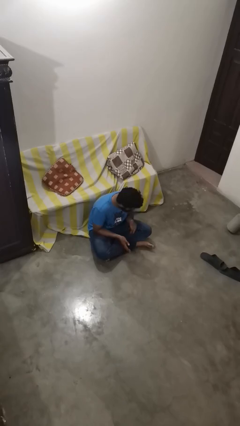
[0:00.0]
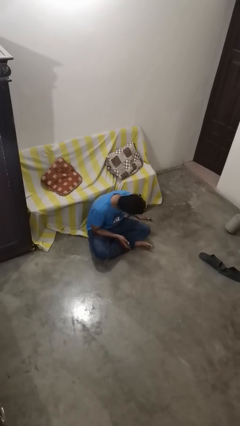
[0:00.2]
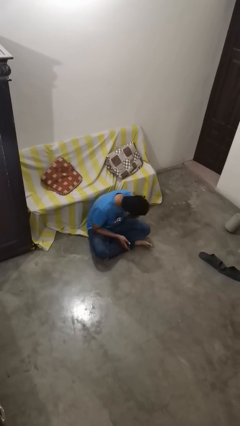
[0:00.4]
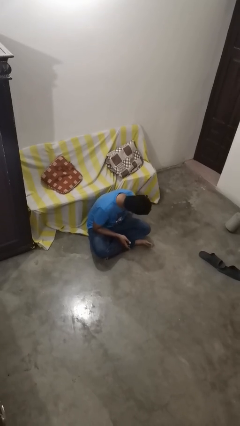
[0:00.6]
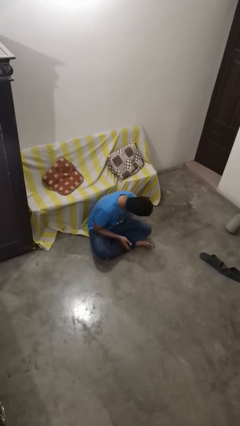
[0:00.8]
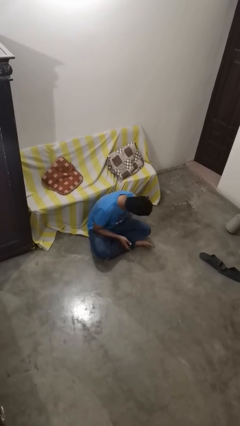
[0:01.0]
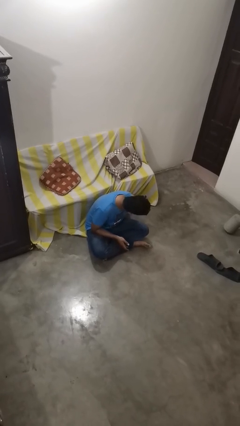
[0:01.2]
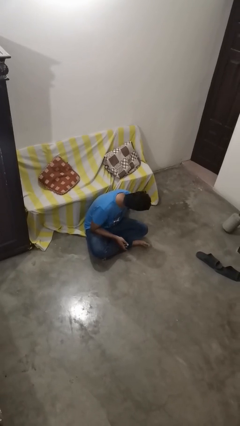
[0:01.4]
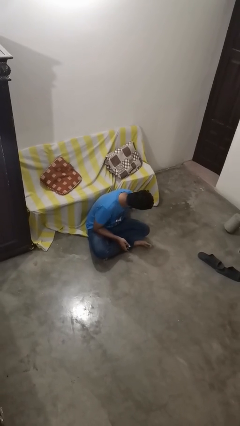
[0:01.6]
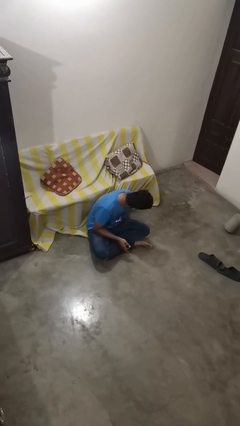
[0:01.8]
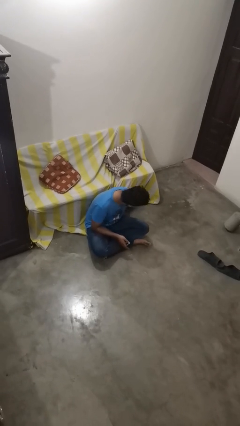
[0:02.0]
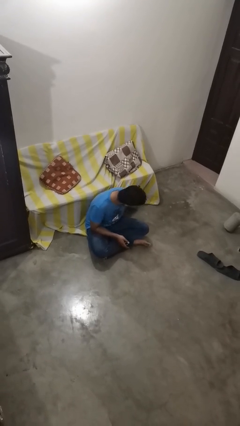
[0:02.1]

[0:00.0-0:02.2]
person searches under couch

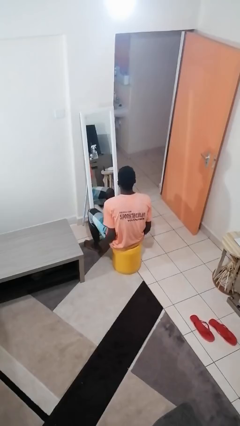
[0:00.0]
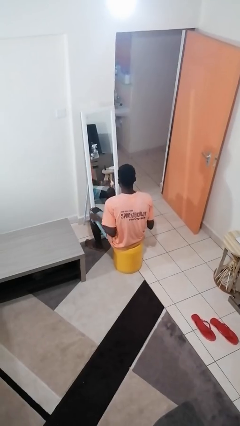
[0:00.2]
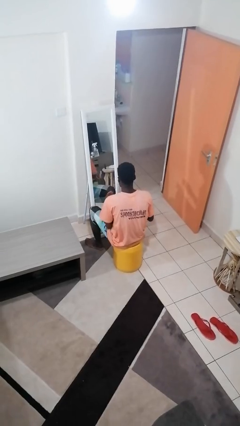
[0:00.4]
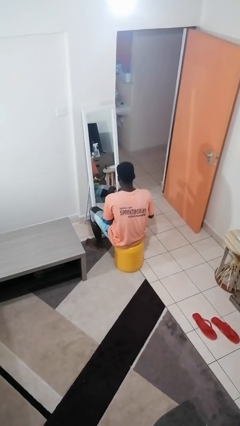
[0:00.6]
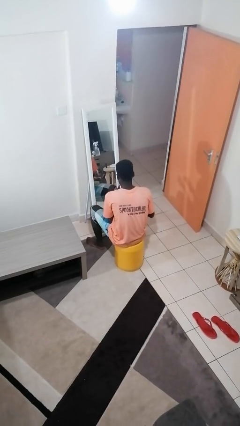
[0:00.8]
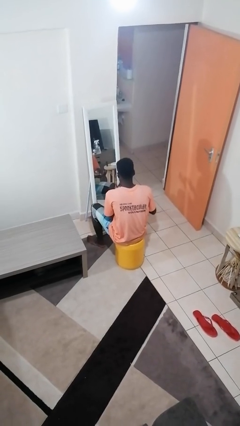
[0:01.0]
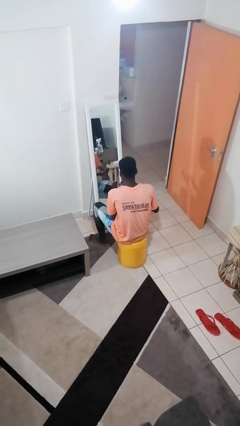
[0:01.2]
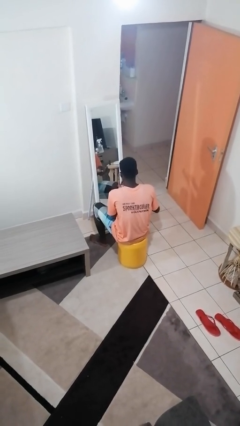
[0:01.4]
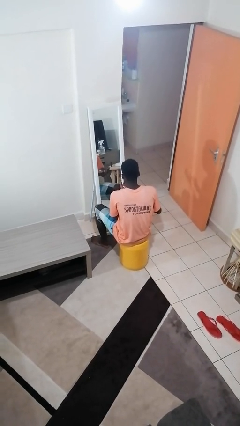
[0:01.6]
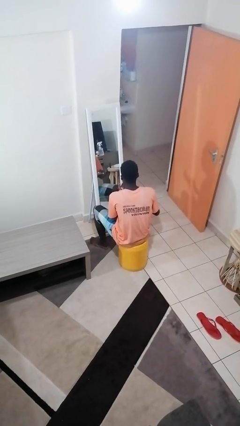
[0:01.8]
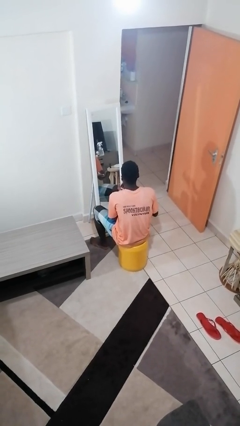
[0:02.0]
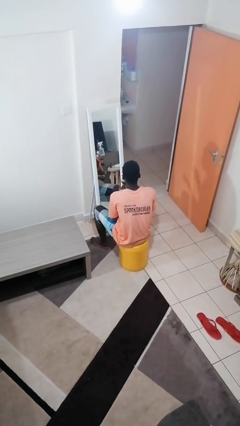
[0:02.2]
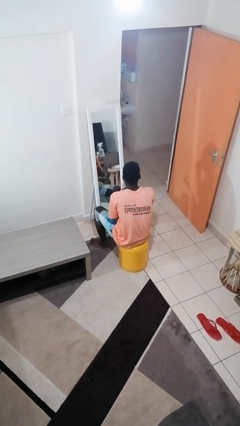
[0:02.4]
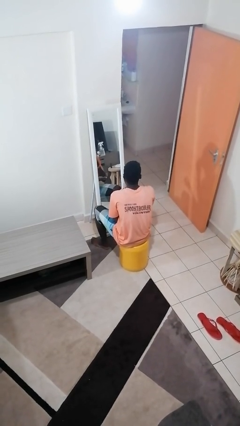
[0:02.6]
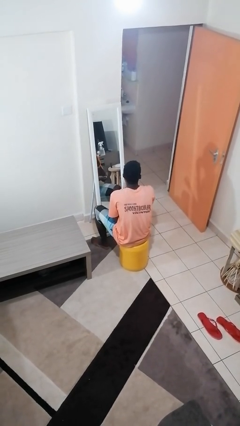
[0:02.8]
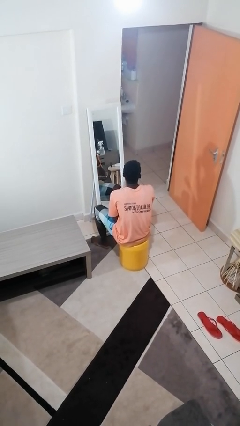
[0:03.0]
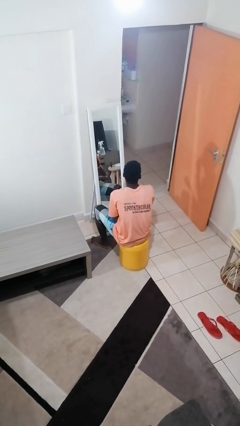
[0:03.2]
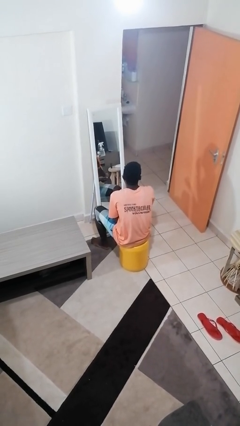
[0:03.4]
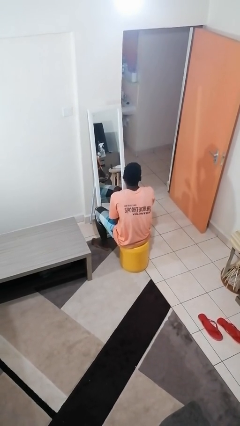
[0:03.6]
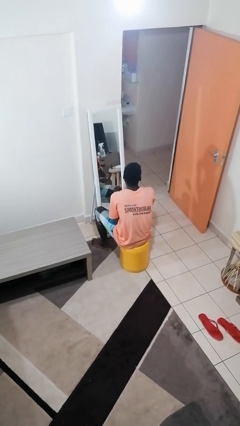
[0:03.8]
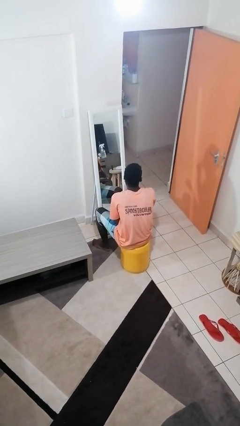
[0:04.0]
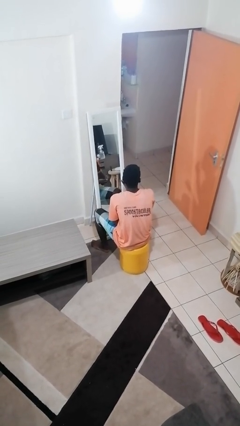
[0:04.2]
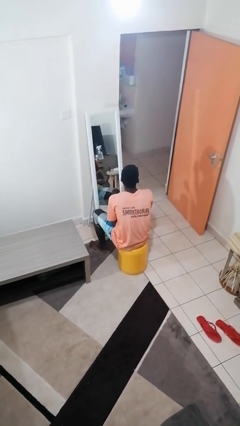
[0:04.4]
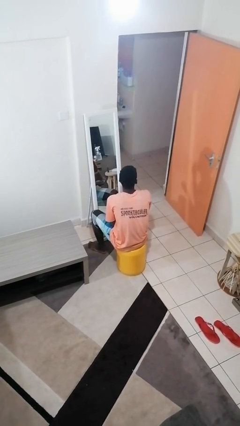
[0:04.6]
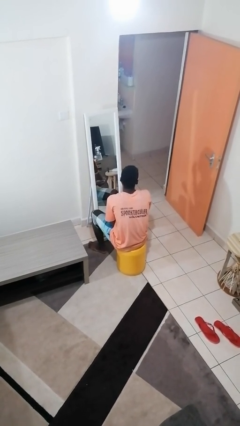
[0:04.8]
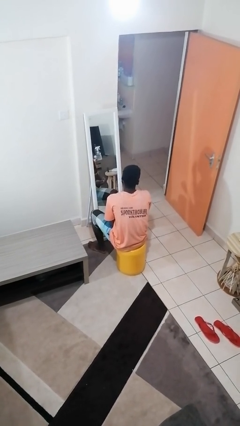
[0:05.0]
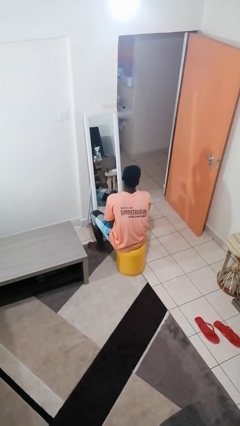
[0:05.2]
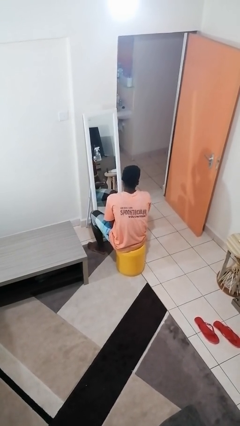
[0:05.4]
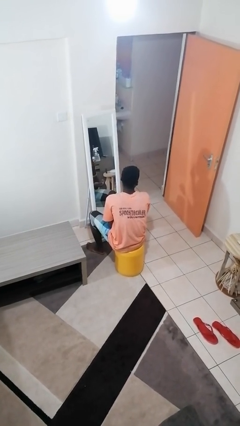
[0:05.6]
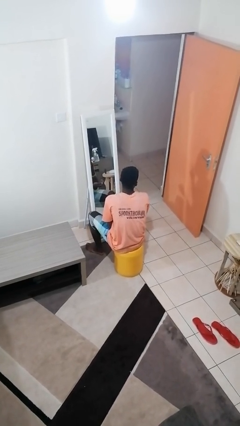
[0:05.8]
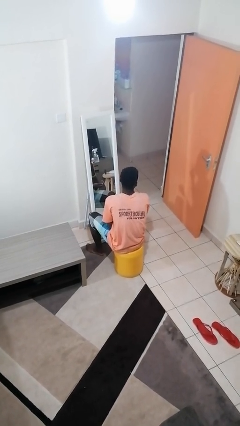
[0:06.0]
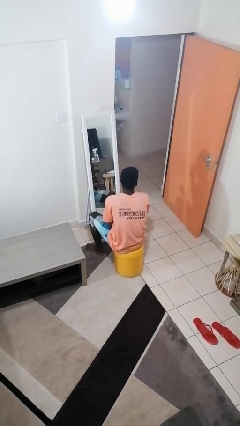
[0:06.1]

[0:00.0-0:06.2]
person applies foundation makeup

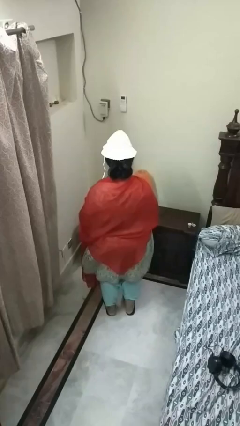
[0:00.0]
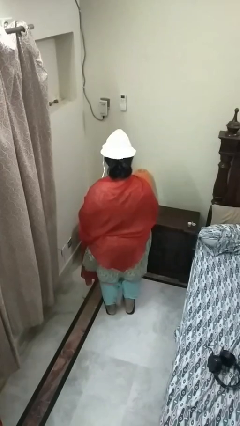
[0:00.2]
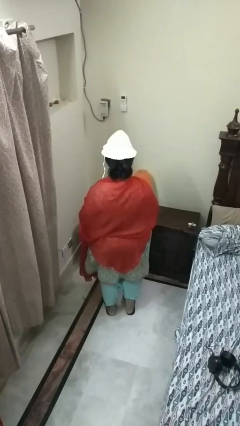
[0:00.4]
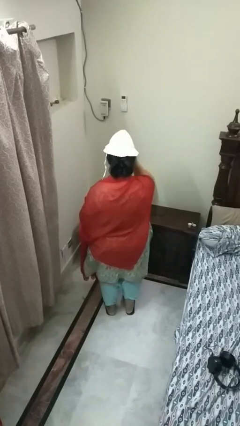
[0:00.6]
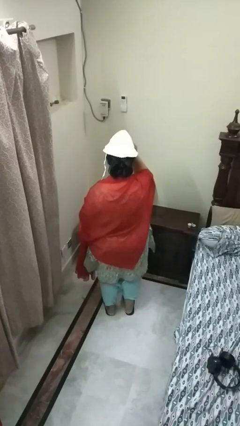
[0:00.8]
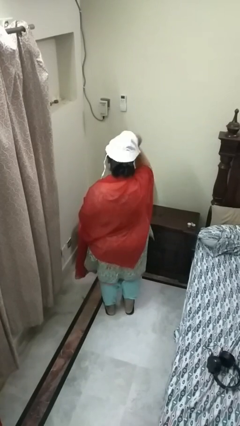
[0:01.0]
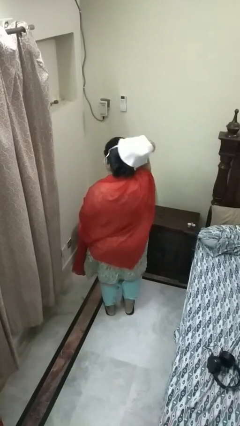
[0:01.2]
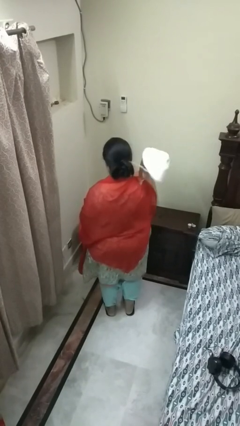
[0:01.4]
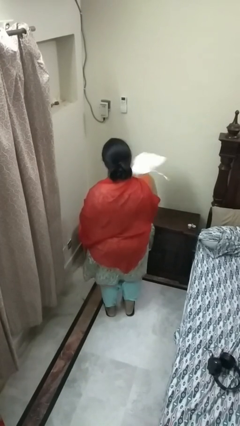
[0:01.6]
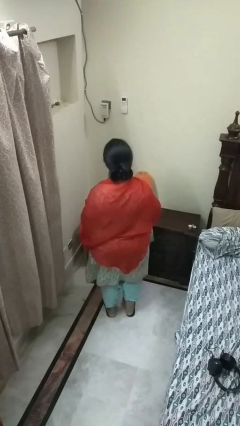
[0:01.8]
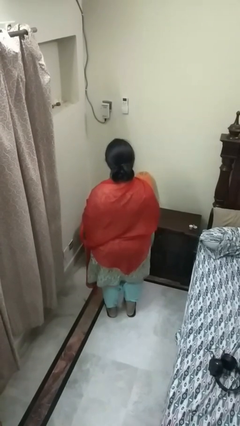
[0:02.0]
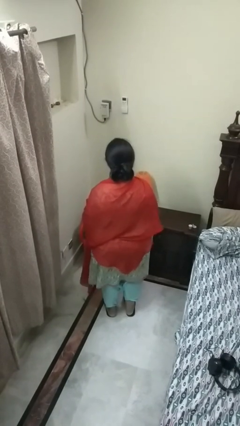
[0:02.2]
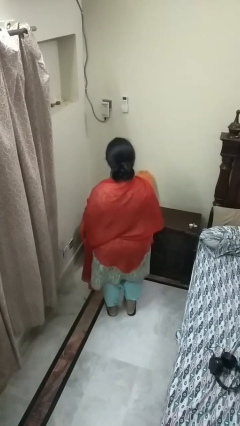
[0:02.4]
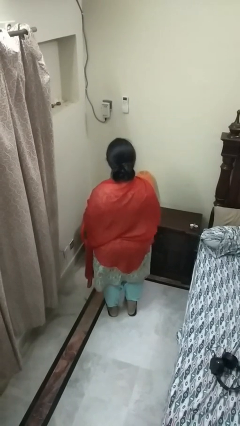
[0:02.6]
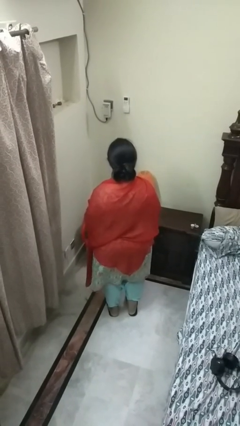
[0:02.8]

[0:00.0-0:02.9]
person takes off hat

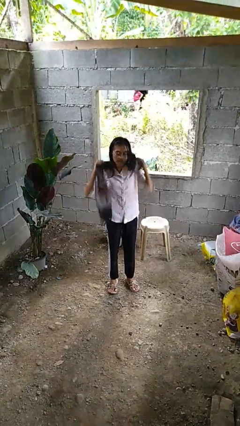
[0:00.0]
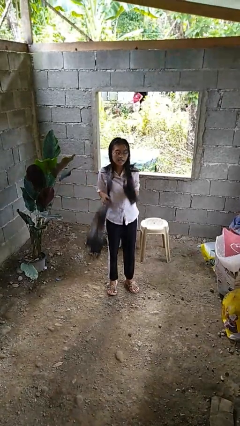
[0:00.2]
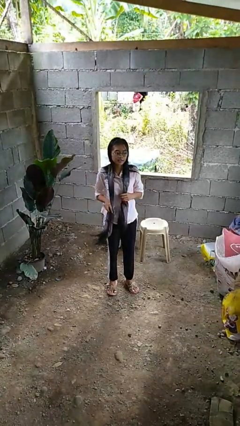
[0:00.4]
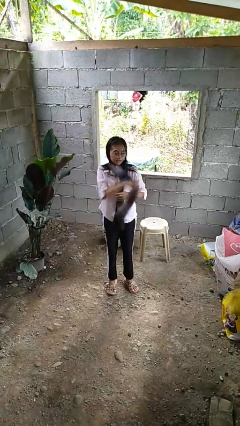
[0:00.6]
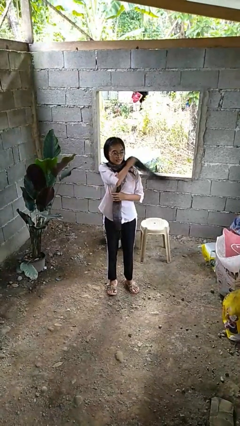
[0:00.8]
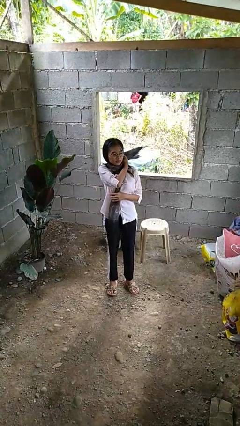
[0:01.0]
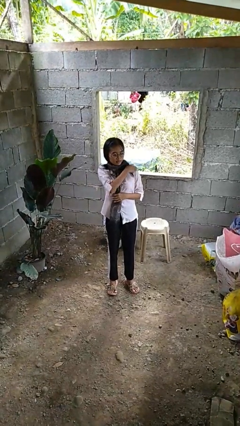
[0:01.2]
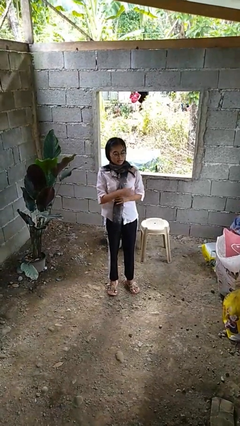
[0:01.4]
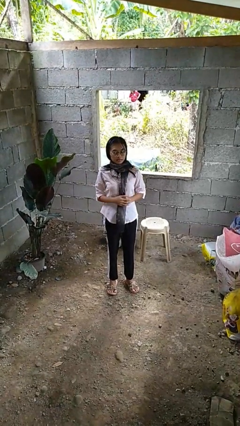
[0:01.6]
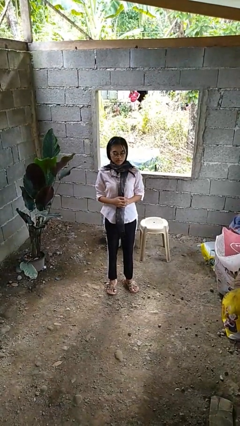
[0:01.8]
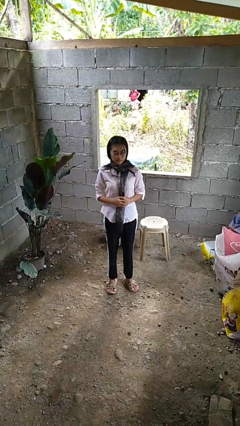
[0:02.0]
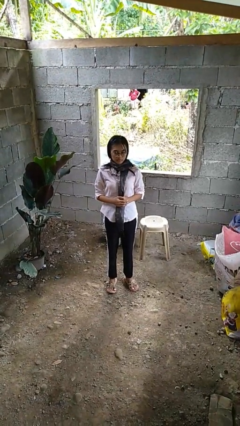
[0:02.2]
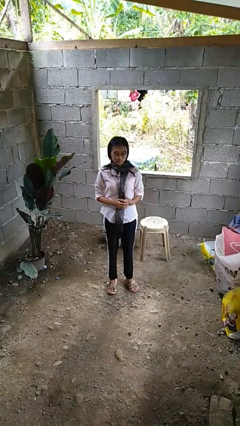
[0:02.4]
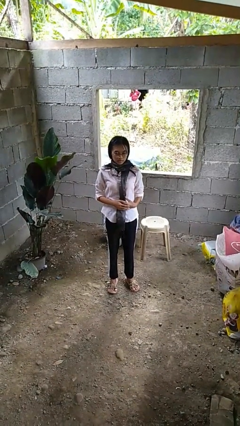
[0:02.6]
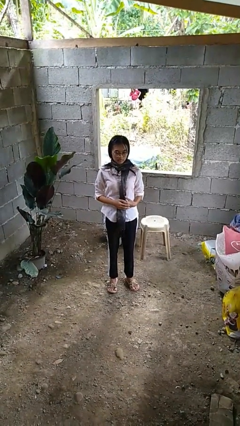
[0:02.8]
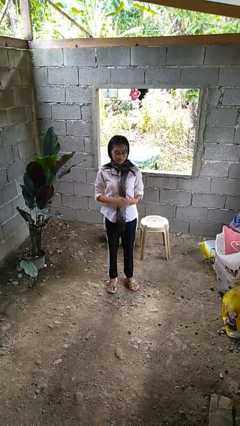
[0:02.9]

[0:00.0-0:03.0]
person puts on scarf

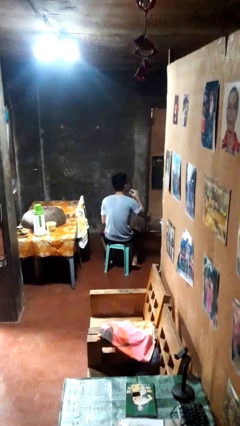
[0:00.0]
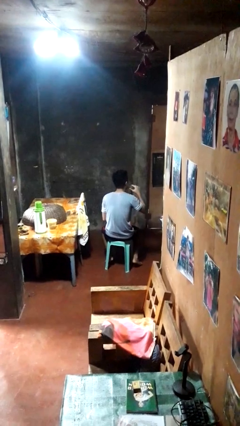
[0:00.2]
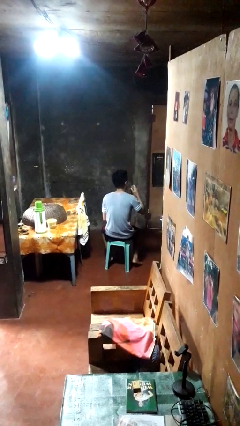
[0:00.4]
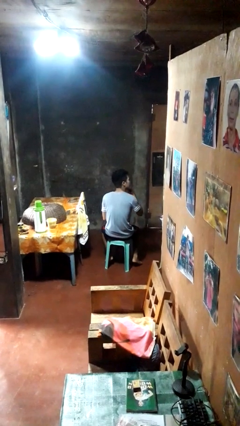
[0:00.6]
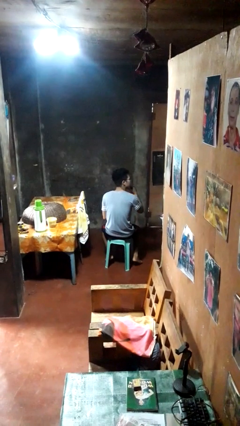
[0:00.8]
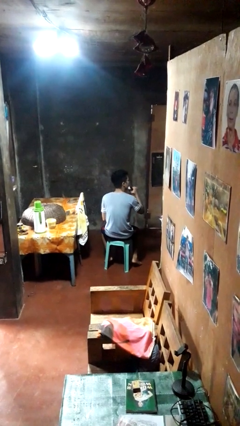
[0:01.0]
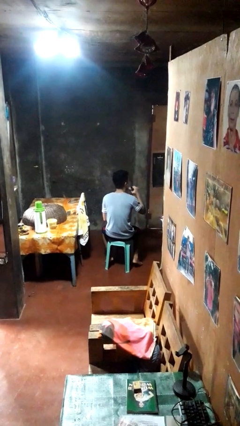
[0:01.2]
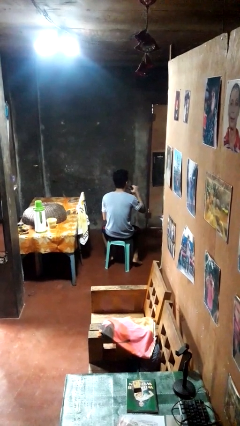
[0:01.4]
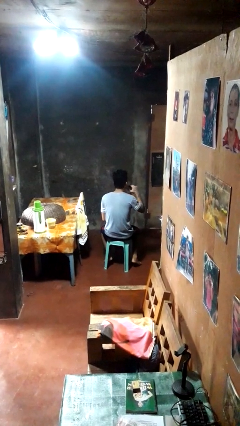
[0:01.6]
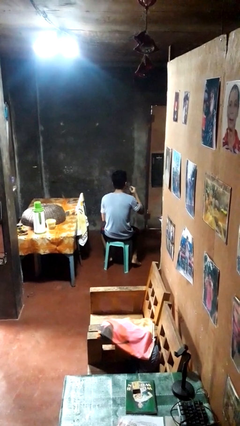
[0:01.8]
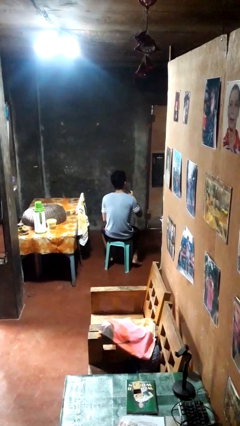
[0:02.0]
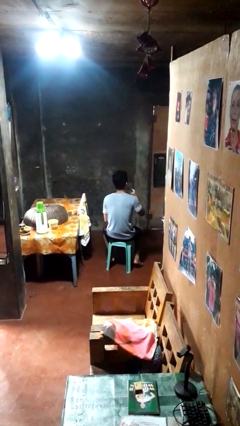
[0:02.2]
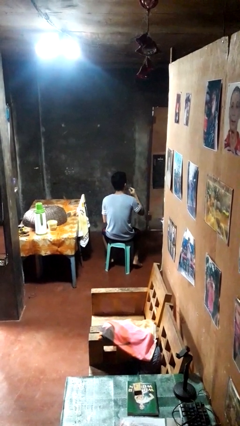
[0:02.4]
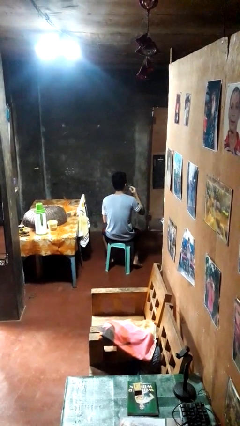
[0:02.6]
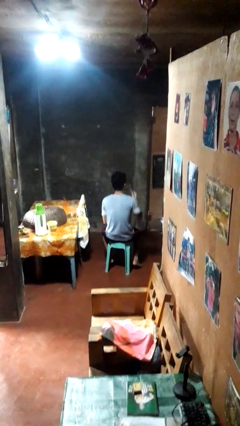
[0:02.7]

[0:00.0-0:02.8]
person shaves face
